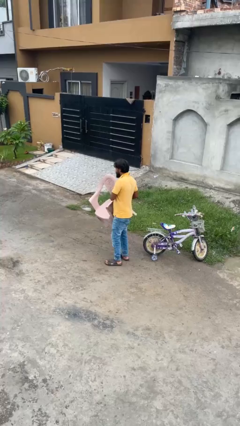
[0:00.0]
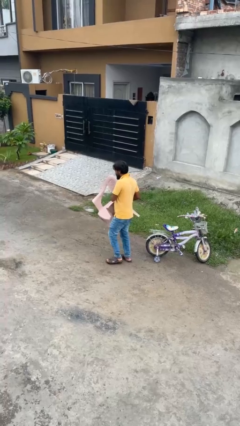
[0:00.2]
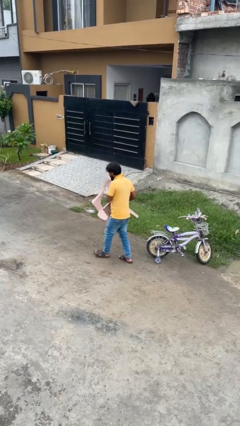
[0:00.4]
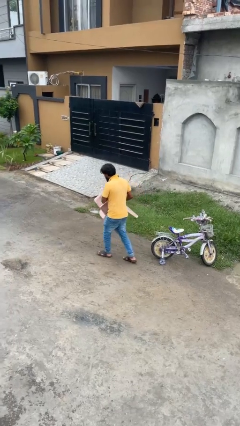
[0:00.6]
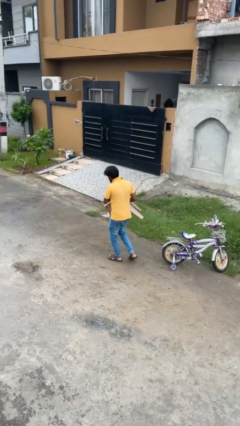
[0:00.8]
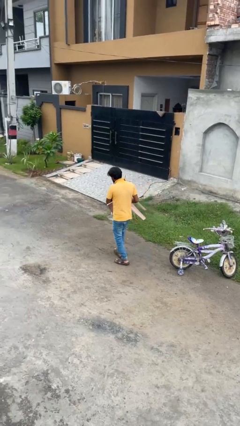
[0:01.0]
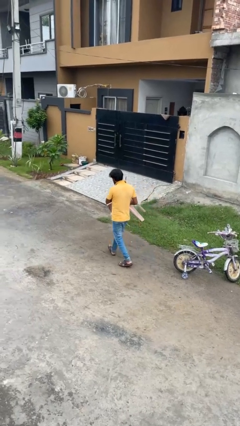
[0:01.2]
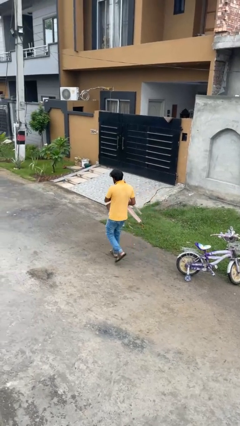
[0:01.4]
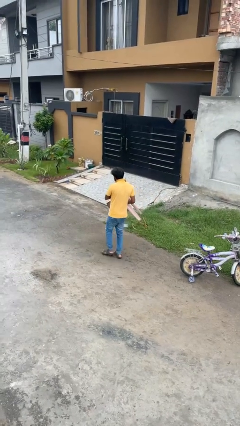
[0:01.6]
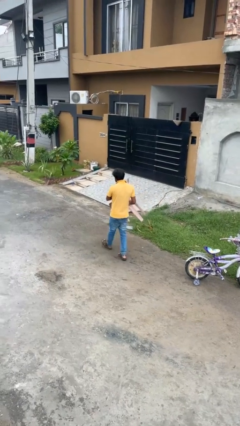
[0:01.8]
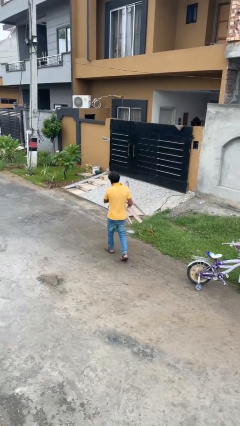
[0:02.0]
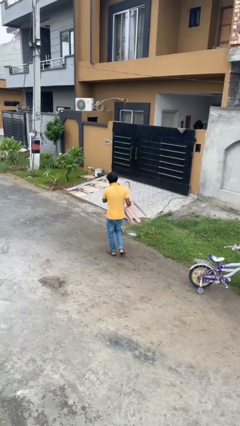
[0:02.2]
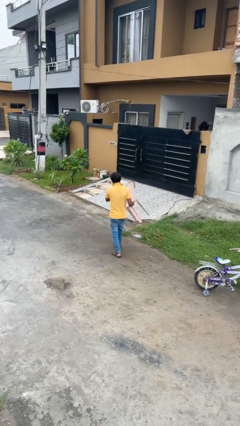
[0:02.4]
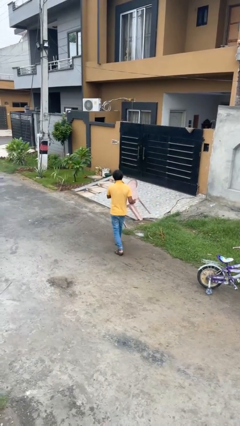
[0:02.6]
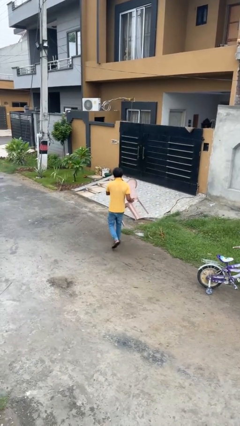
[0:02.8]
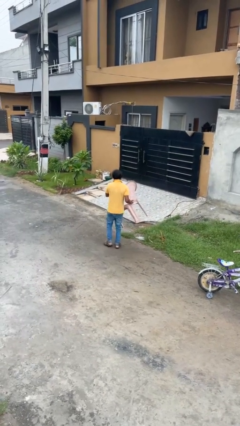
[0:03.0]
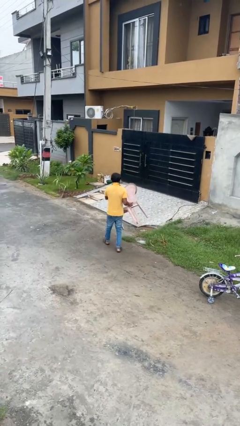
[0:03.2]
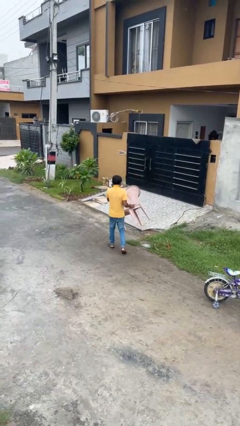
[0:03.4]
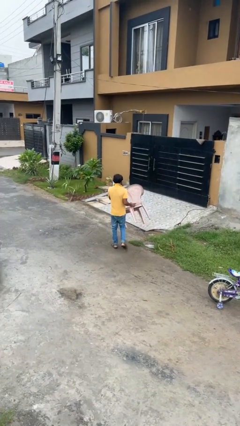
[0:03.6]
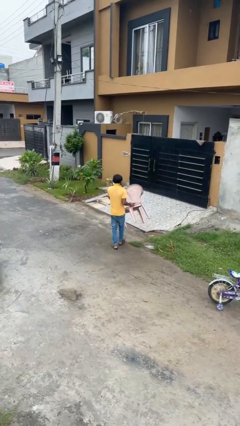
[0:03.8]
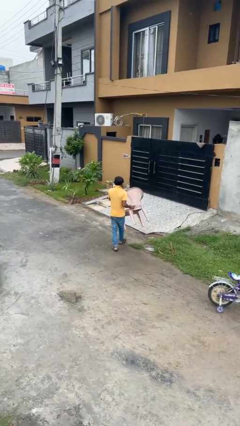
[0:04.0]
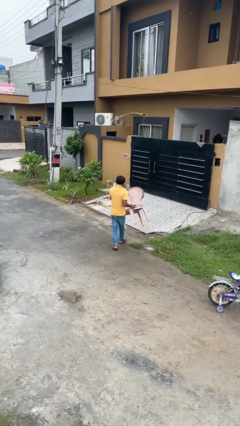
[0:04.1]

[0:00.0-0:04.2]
person carries furniture

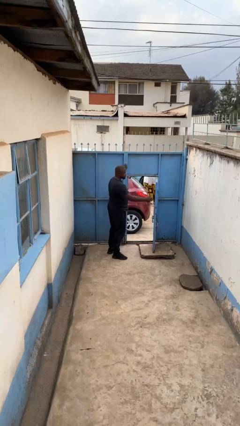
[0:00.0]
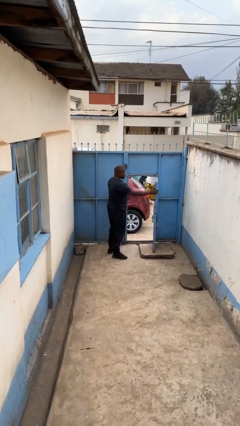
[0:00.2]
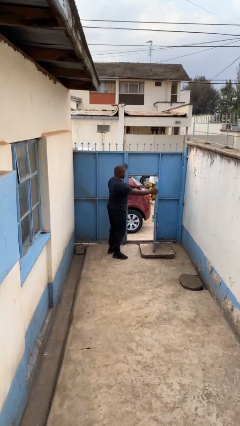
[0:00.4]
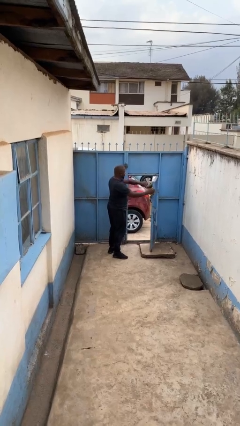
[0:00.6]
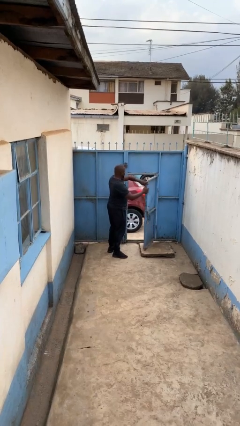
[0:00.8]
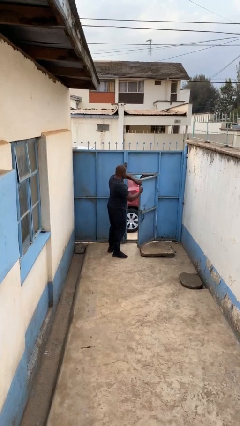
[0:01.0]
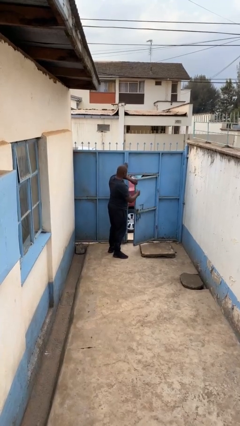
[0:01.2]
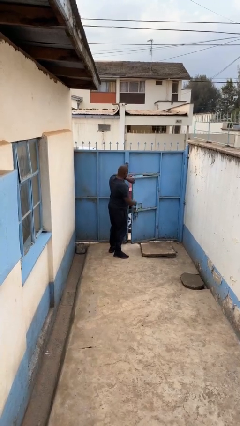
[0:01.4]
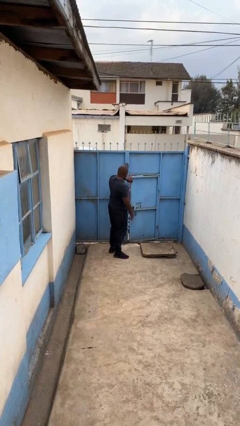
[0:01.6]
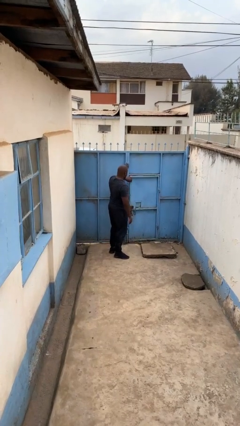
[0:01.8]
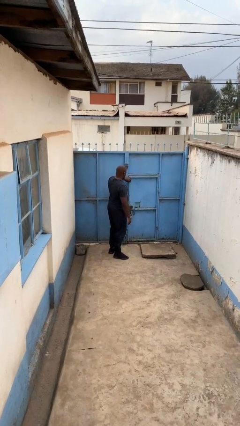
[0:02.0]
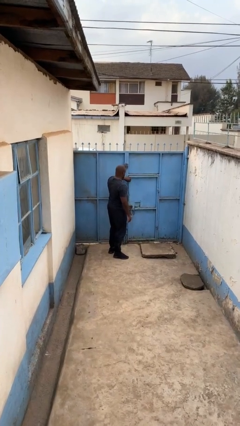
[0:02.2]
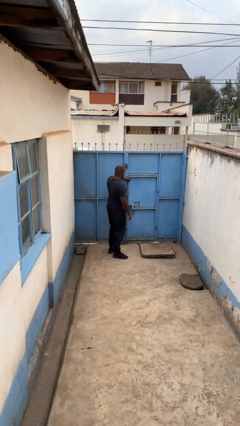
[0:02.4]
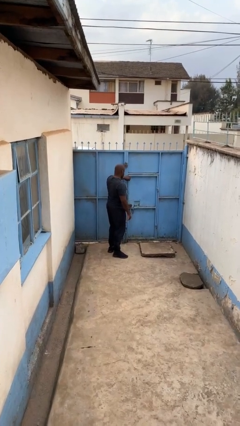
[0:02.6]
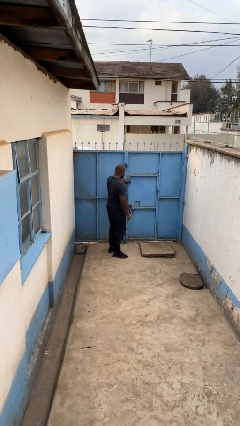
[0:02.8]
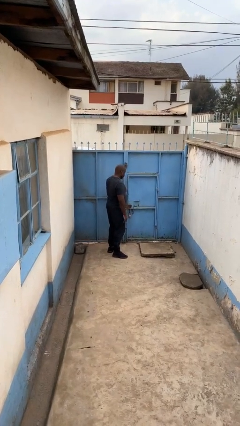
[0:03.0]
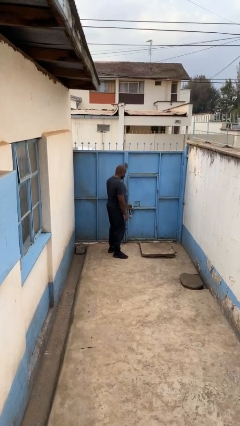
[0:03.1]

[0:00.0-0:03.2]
person closes gate

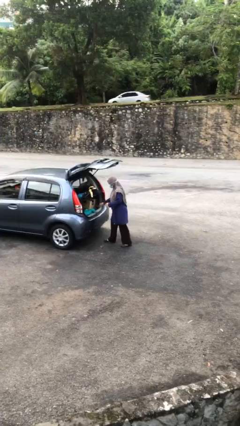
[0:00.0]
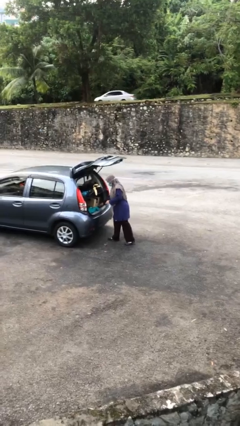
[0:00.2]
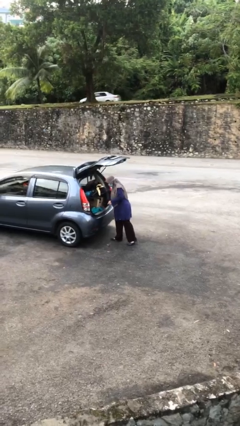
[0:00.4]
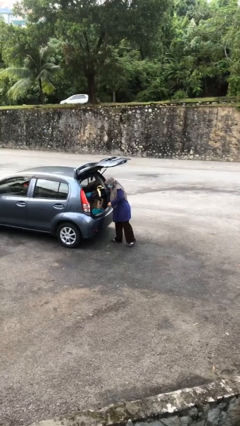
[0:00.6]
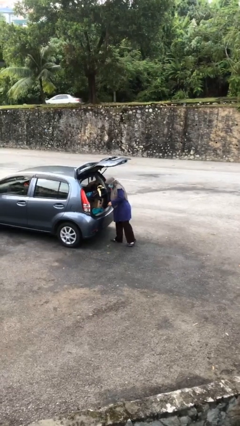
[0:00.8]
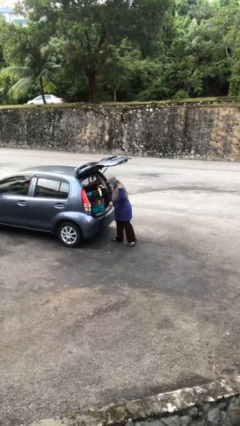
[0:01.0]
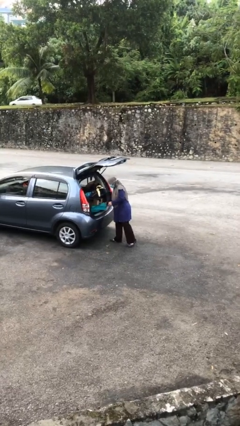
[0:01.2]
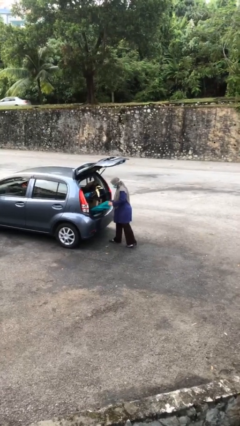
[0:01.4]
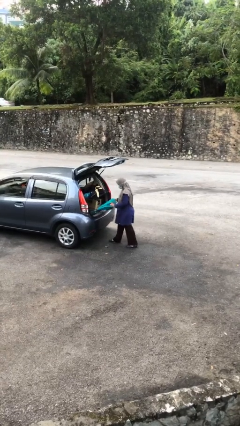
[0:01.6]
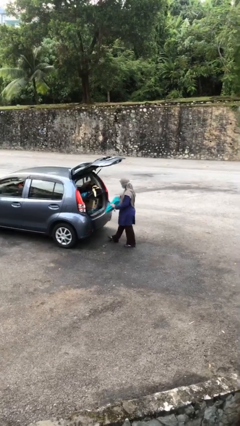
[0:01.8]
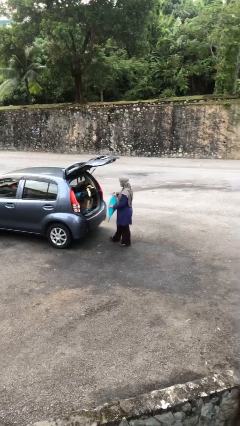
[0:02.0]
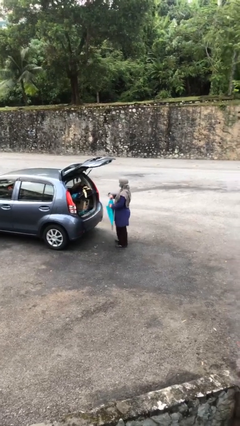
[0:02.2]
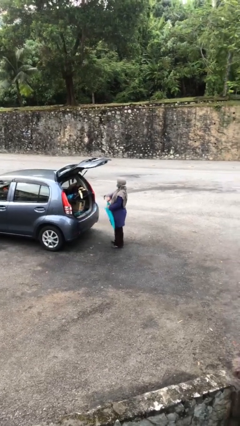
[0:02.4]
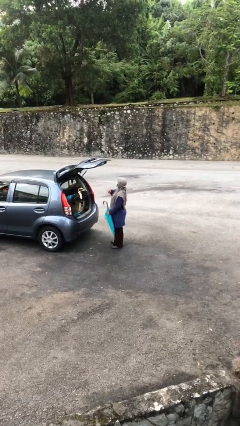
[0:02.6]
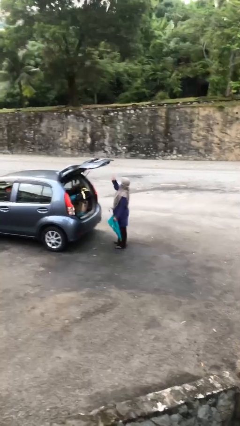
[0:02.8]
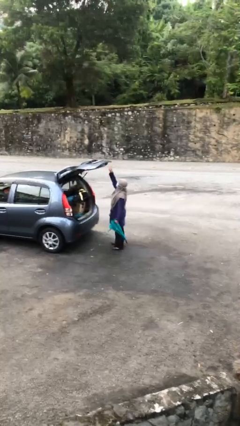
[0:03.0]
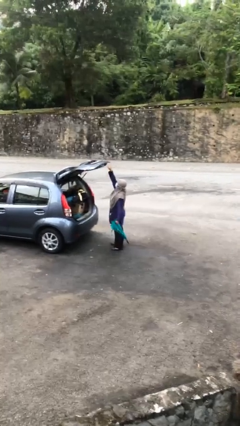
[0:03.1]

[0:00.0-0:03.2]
person unloads car

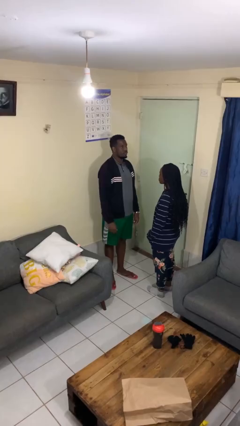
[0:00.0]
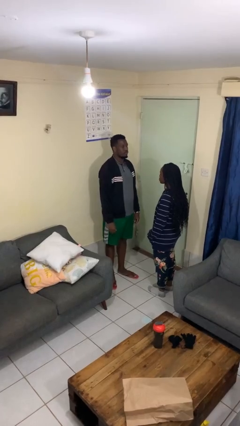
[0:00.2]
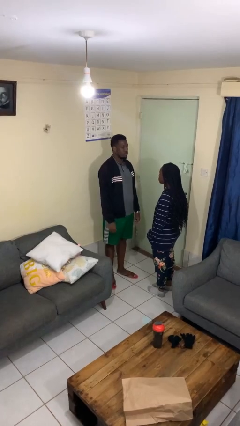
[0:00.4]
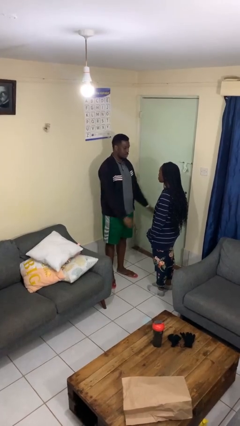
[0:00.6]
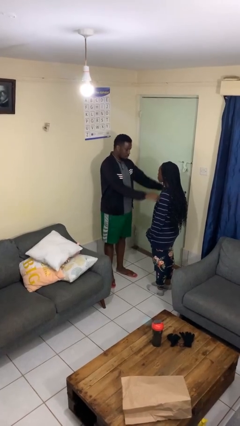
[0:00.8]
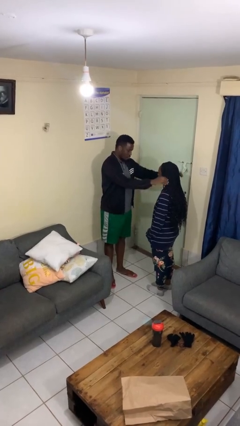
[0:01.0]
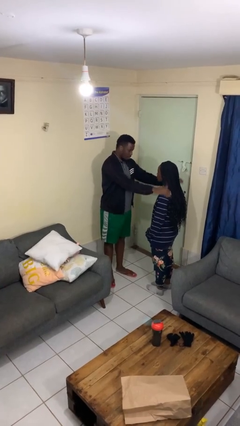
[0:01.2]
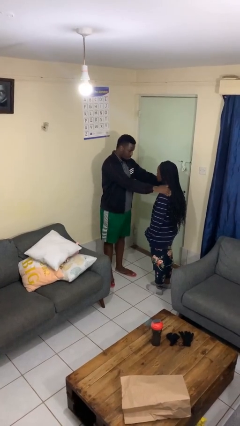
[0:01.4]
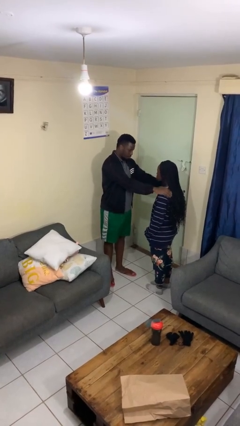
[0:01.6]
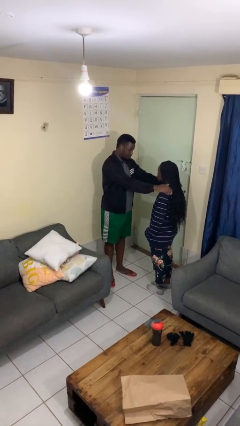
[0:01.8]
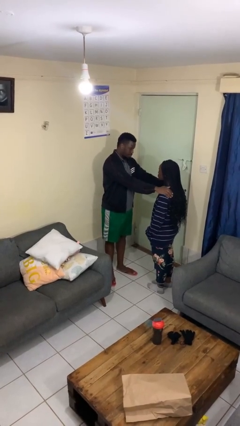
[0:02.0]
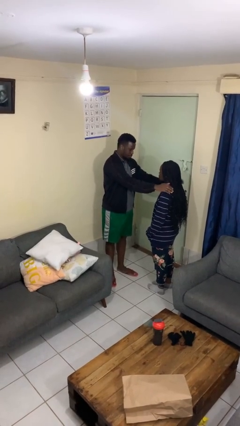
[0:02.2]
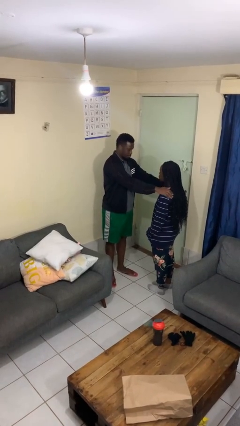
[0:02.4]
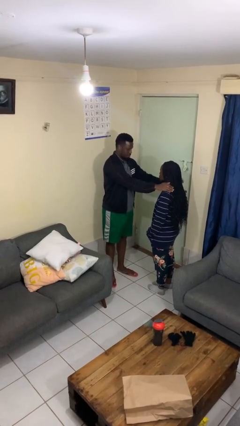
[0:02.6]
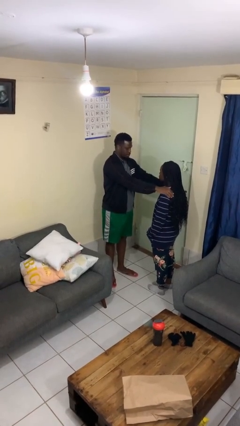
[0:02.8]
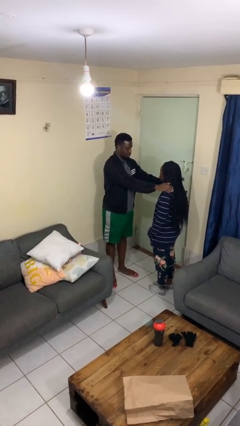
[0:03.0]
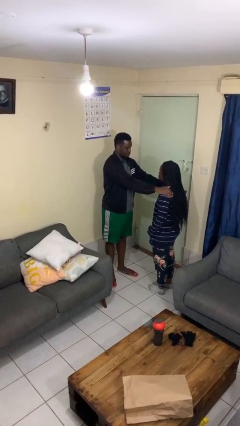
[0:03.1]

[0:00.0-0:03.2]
person pounds shoulders of person

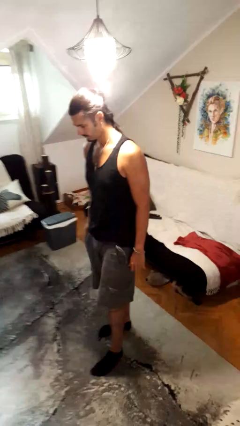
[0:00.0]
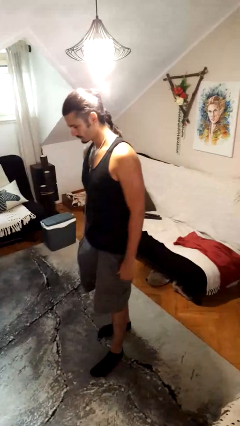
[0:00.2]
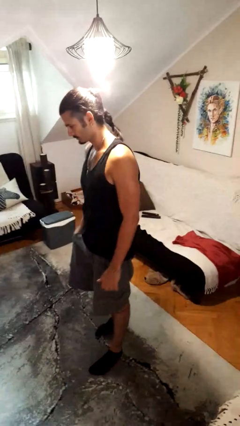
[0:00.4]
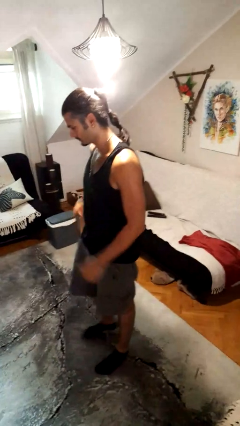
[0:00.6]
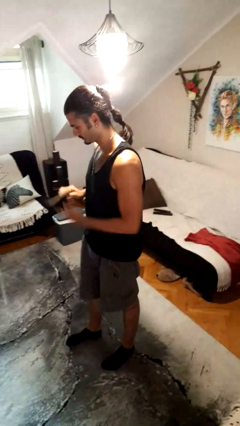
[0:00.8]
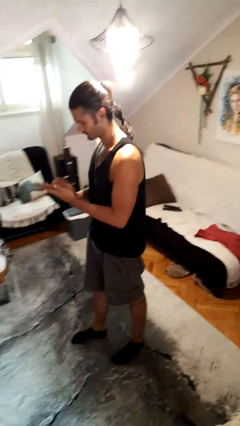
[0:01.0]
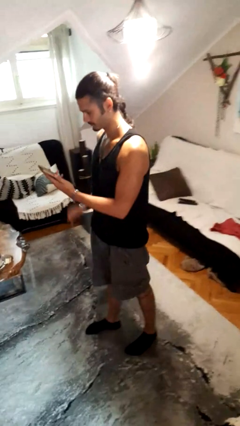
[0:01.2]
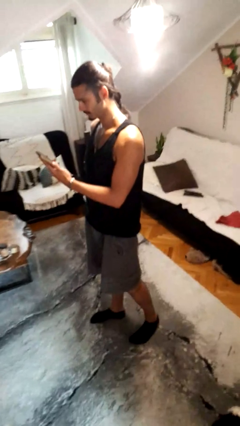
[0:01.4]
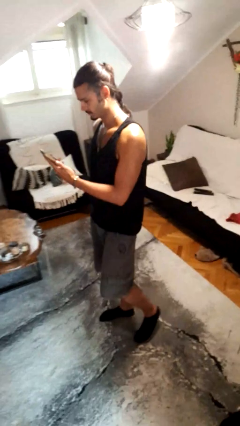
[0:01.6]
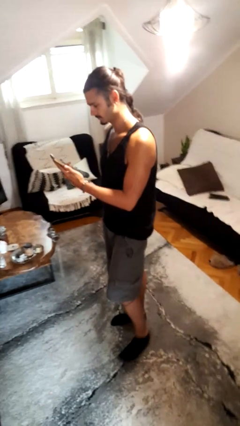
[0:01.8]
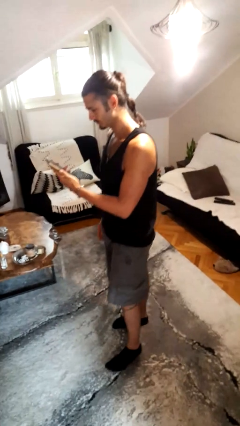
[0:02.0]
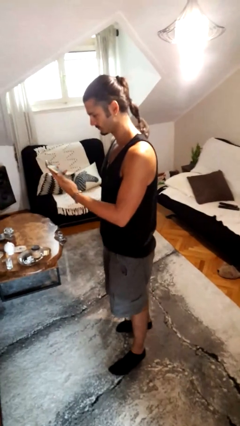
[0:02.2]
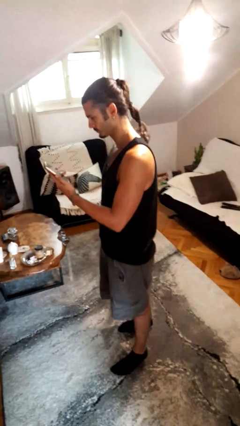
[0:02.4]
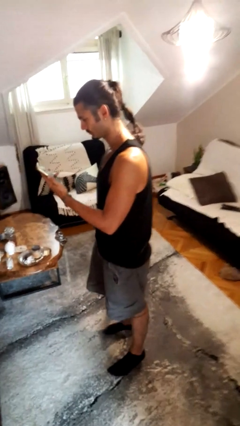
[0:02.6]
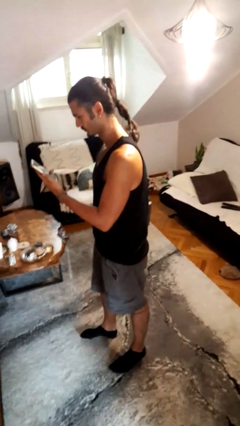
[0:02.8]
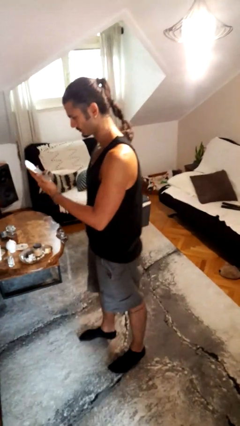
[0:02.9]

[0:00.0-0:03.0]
person takes phone from pocket

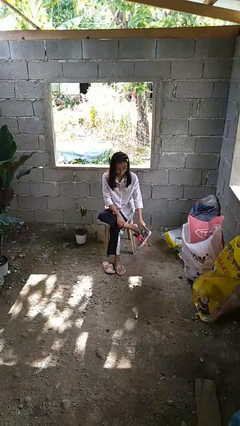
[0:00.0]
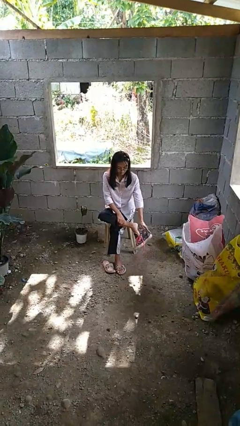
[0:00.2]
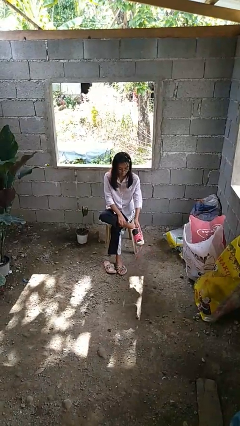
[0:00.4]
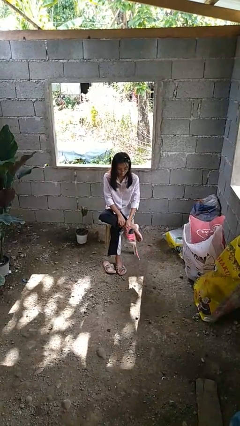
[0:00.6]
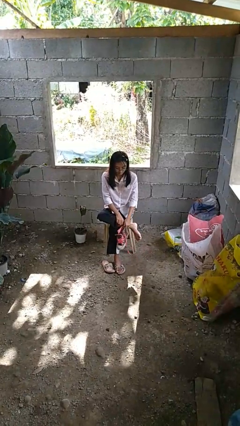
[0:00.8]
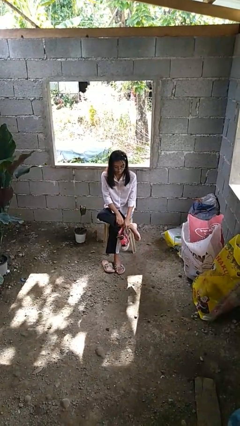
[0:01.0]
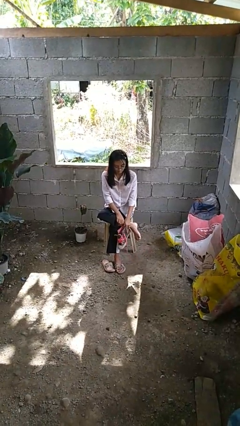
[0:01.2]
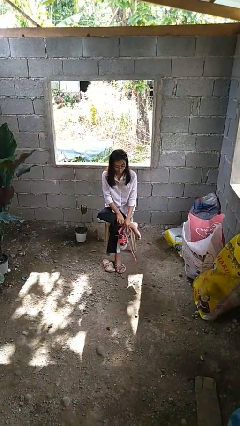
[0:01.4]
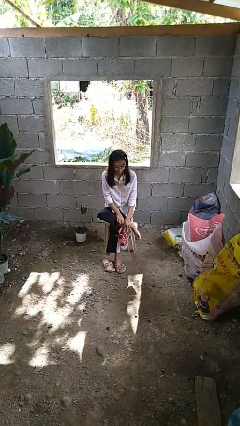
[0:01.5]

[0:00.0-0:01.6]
person takes off shoes
